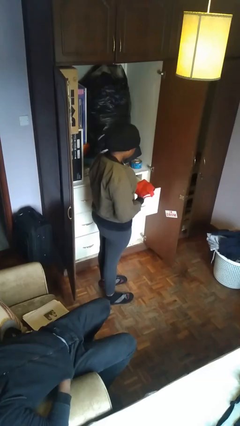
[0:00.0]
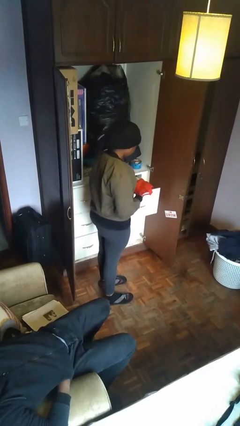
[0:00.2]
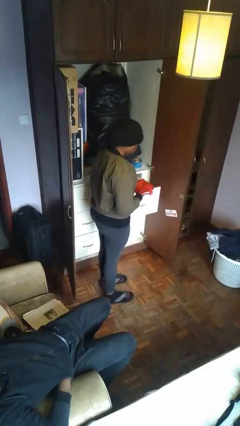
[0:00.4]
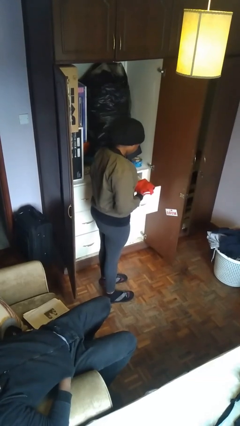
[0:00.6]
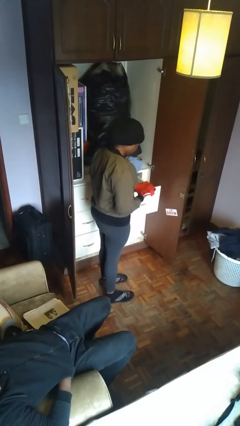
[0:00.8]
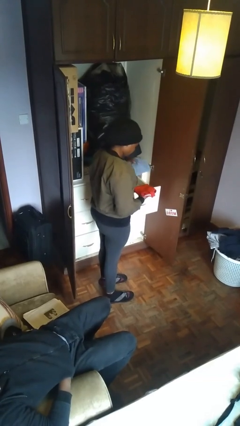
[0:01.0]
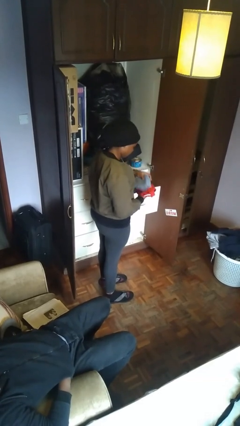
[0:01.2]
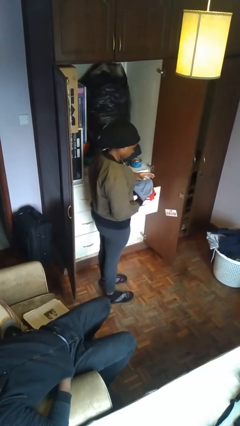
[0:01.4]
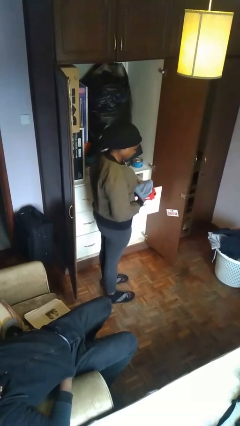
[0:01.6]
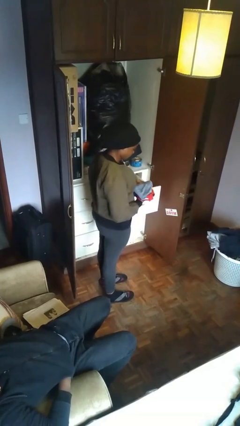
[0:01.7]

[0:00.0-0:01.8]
person takes clothes from dresser

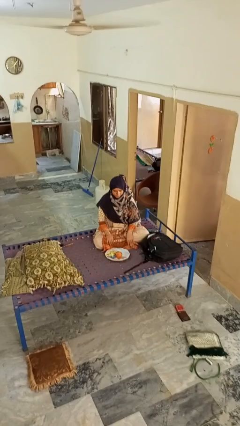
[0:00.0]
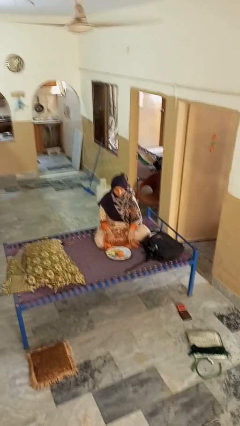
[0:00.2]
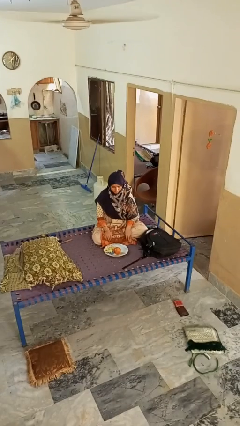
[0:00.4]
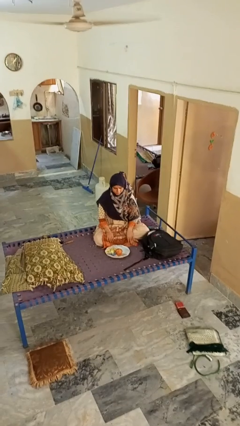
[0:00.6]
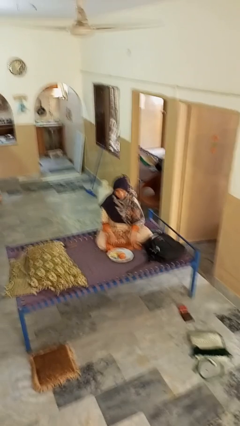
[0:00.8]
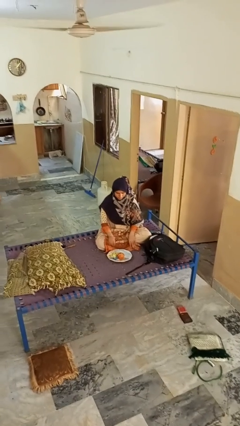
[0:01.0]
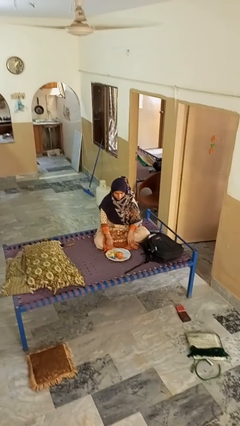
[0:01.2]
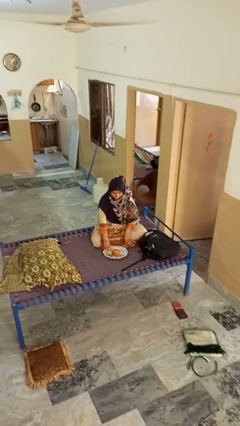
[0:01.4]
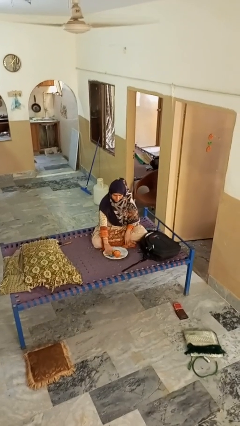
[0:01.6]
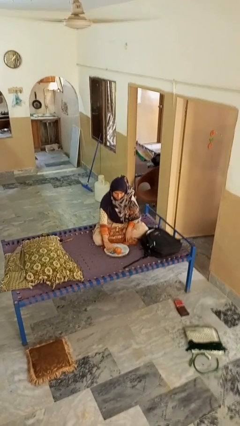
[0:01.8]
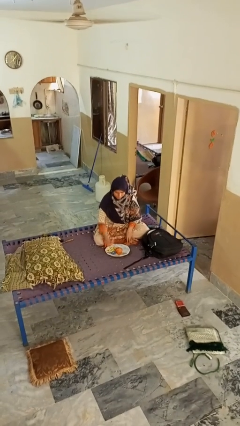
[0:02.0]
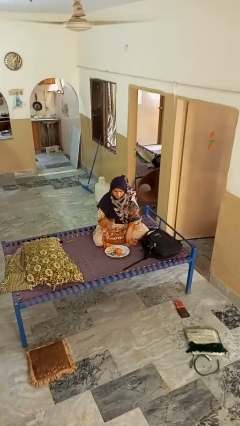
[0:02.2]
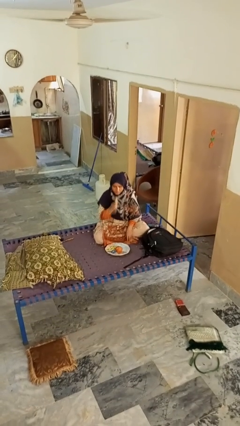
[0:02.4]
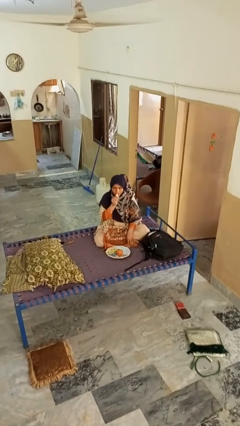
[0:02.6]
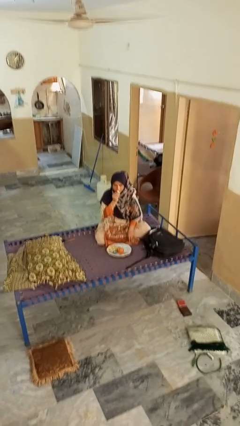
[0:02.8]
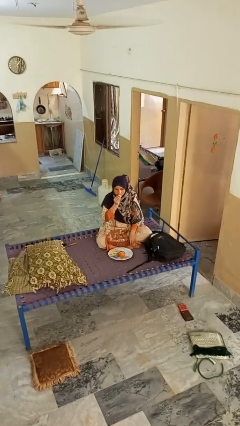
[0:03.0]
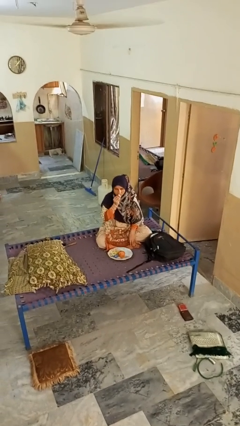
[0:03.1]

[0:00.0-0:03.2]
person eats apple

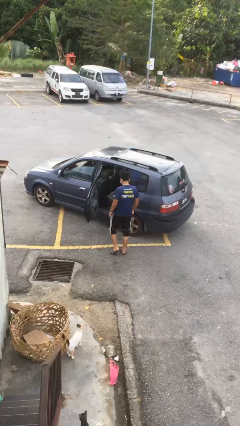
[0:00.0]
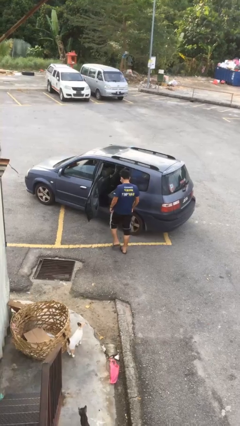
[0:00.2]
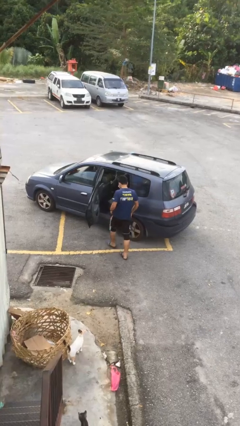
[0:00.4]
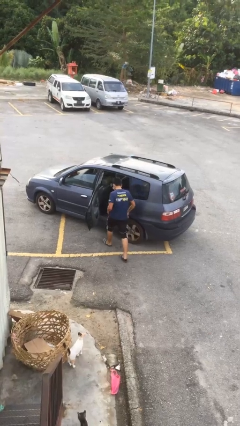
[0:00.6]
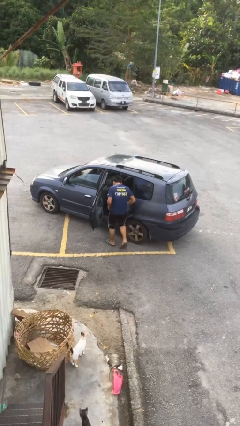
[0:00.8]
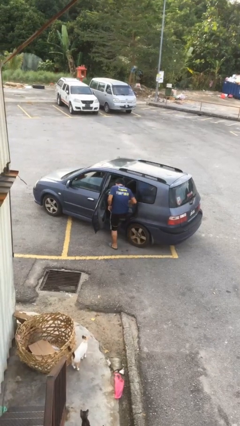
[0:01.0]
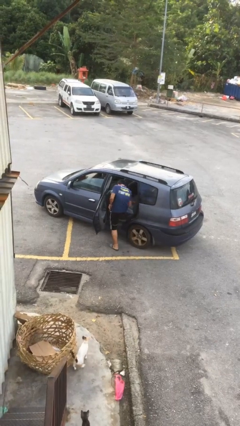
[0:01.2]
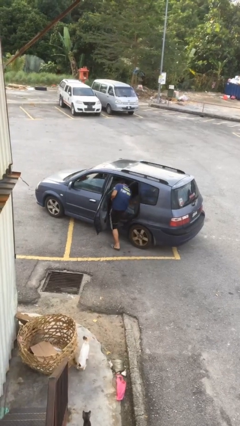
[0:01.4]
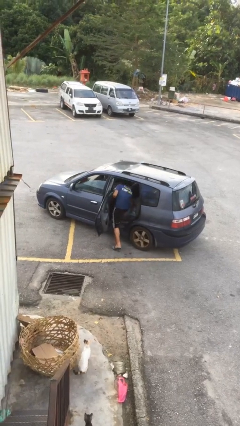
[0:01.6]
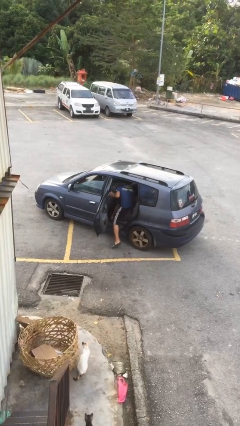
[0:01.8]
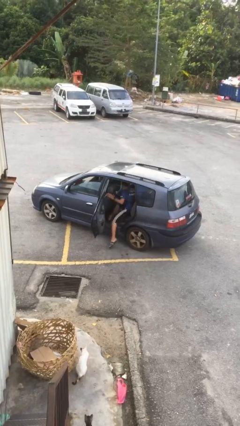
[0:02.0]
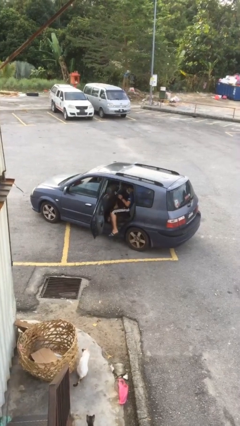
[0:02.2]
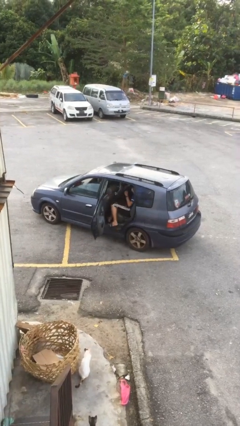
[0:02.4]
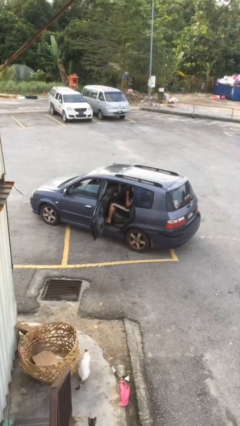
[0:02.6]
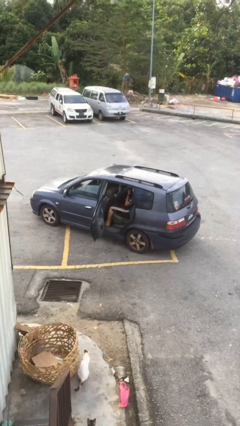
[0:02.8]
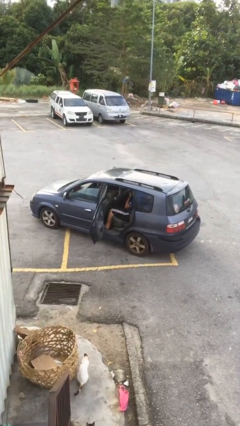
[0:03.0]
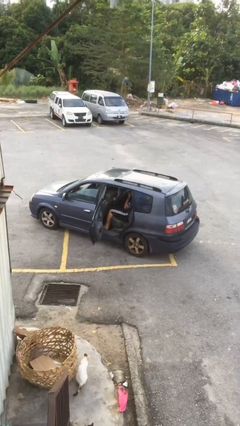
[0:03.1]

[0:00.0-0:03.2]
person enters car

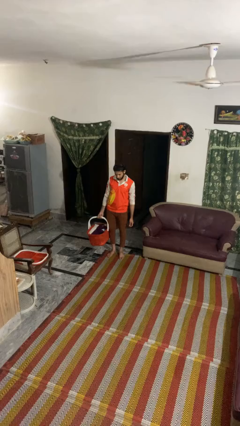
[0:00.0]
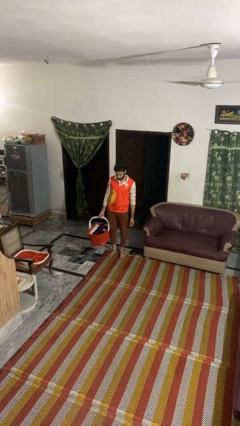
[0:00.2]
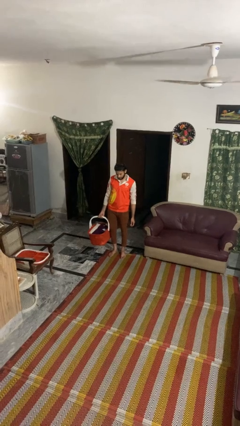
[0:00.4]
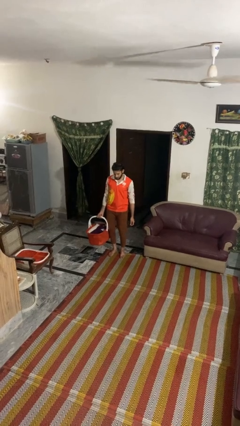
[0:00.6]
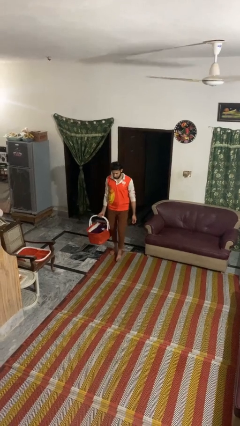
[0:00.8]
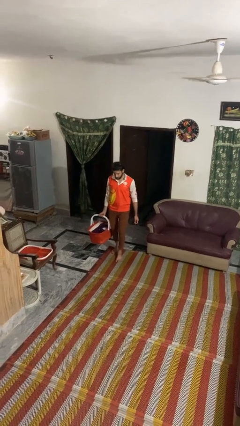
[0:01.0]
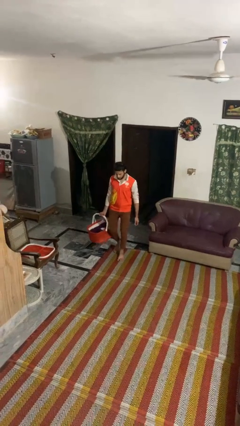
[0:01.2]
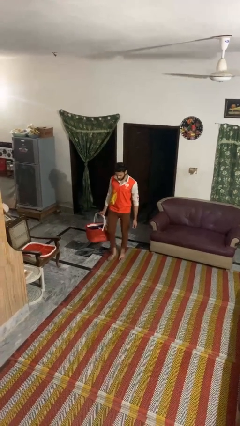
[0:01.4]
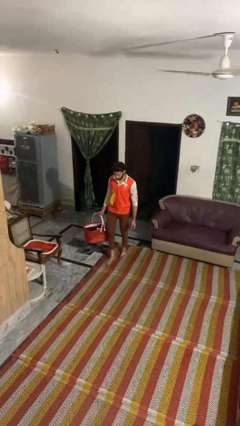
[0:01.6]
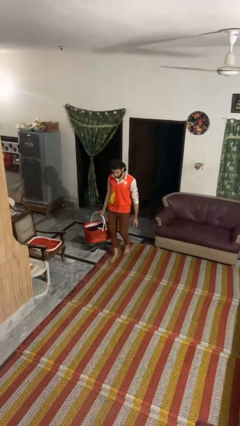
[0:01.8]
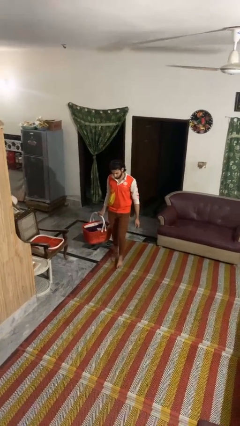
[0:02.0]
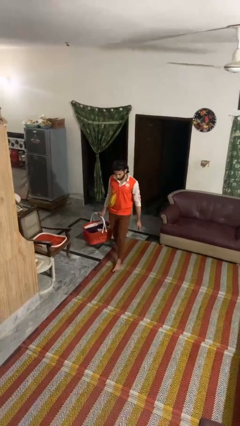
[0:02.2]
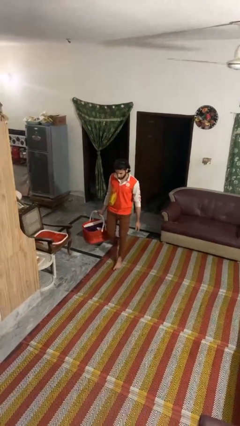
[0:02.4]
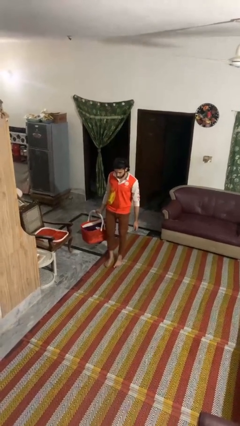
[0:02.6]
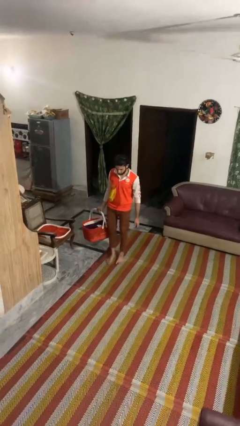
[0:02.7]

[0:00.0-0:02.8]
person carries laundry basket

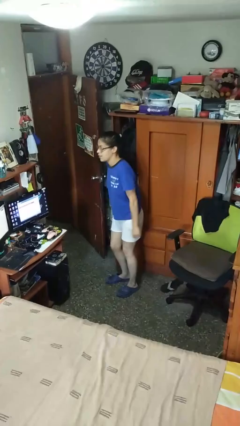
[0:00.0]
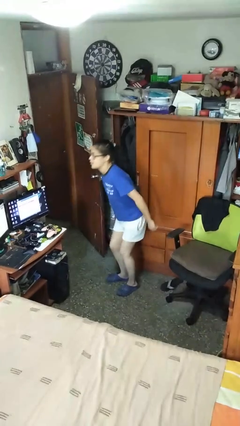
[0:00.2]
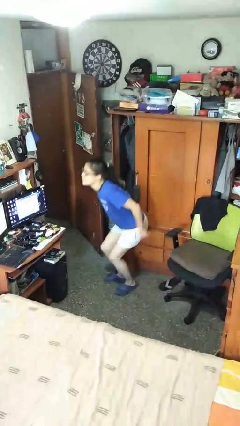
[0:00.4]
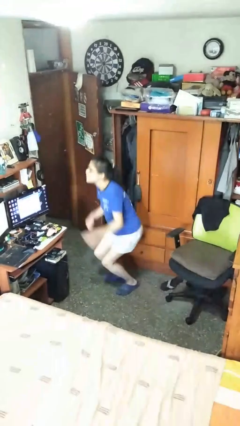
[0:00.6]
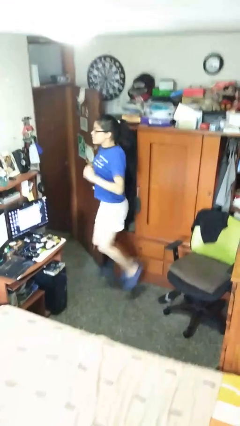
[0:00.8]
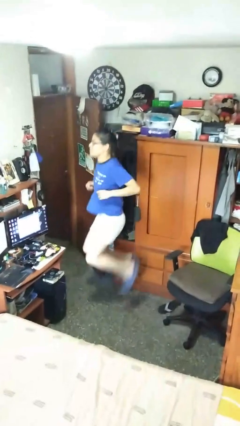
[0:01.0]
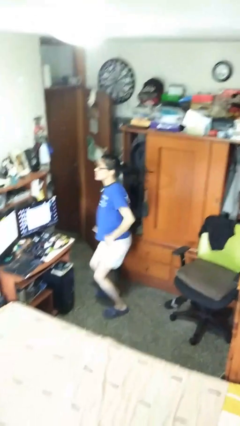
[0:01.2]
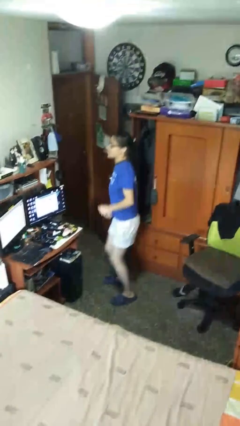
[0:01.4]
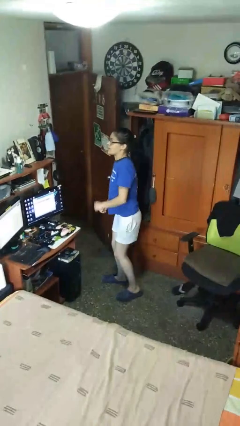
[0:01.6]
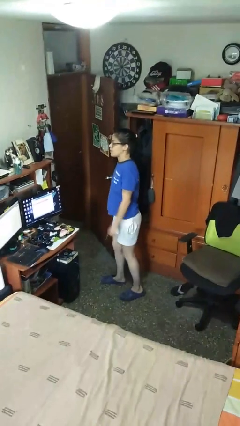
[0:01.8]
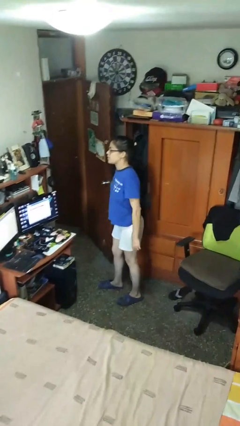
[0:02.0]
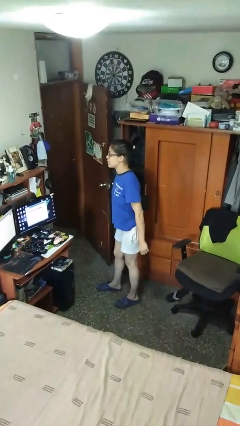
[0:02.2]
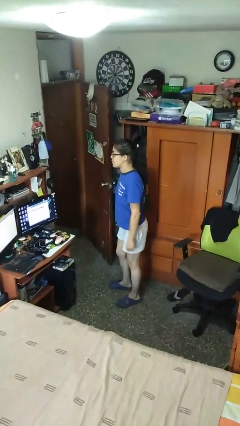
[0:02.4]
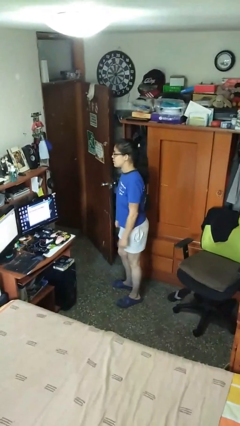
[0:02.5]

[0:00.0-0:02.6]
person jumps

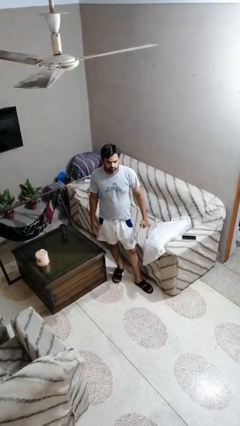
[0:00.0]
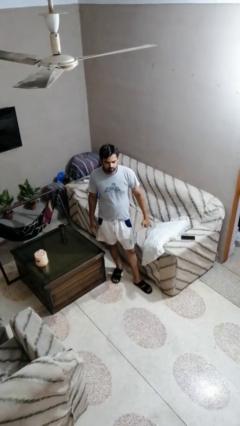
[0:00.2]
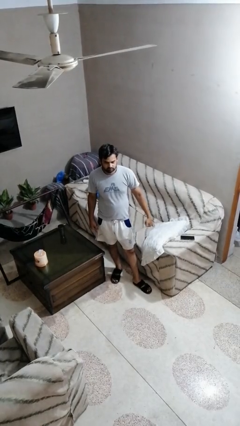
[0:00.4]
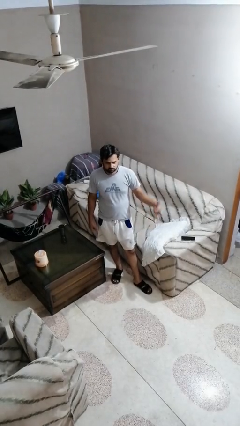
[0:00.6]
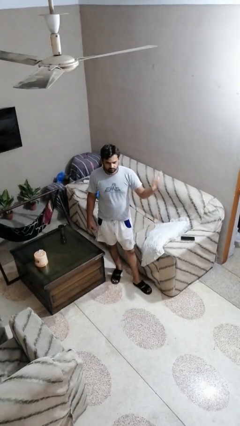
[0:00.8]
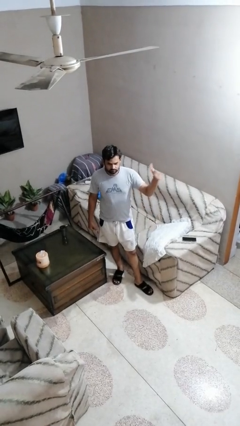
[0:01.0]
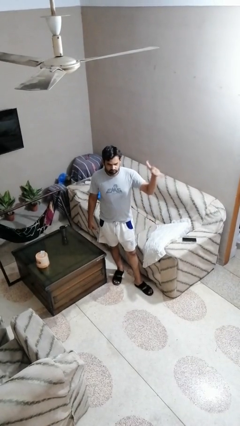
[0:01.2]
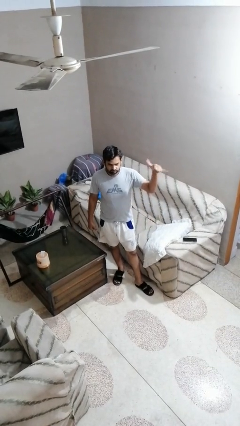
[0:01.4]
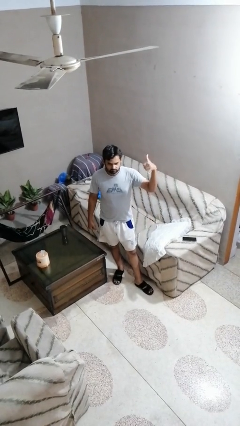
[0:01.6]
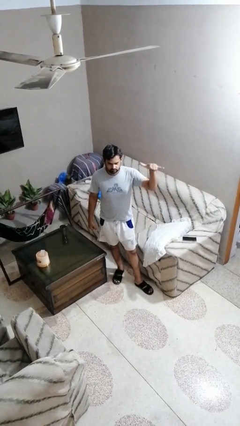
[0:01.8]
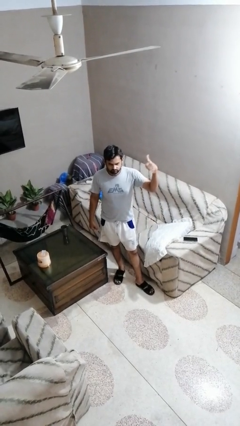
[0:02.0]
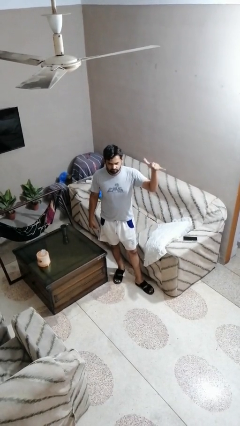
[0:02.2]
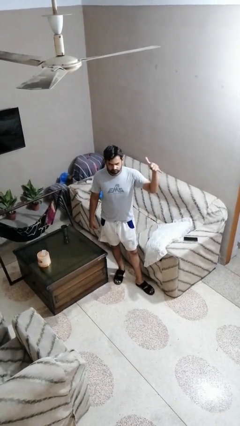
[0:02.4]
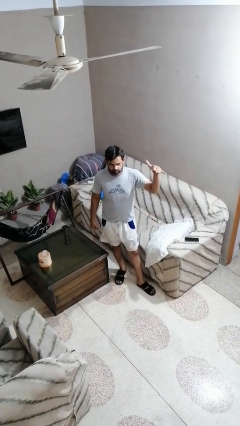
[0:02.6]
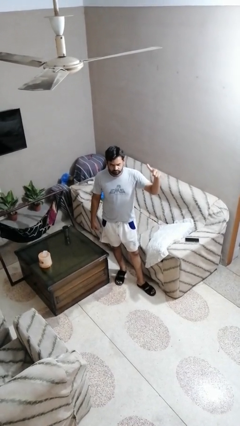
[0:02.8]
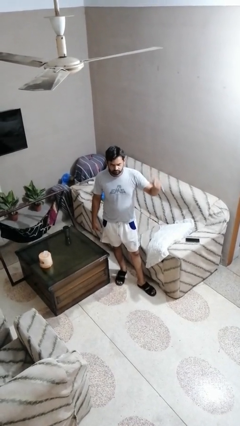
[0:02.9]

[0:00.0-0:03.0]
person gestures hang loose

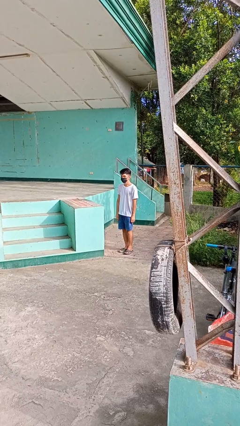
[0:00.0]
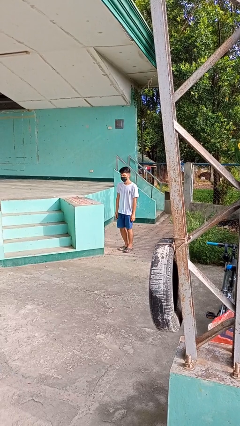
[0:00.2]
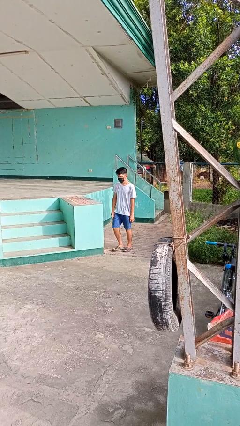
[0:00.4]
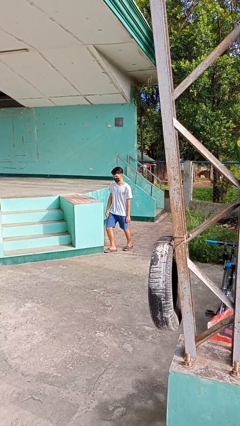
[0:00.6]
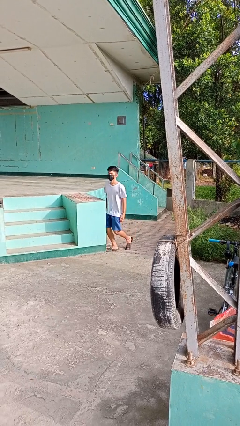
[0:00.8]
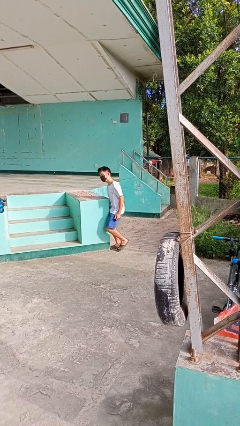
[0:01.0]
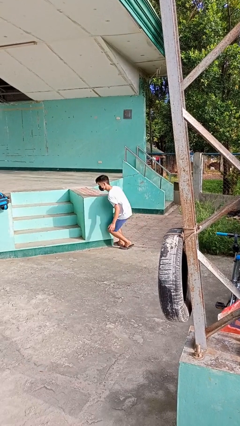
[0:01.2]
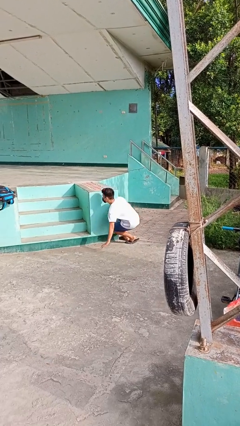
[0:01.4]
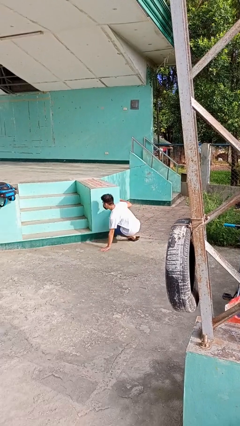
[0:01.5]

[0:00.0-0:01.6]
person trips on object on floor
